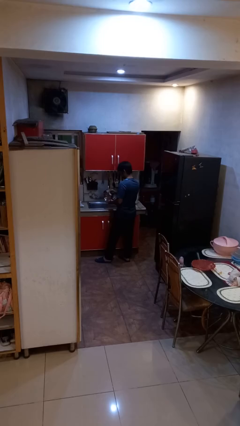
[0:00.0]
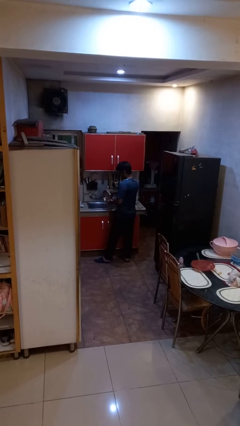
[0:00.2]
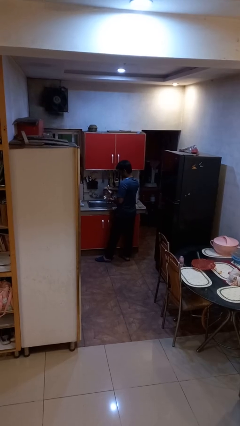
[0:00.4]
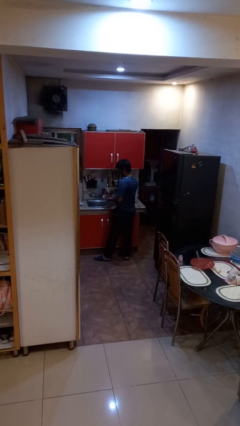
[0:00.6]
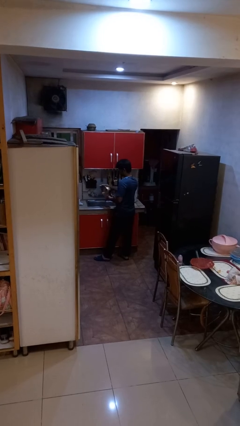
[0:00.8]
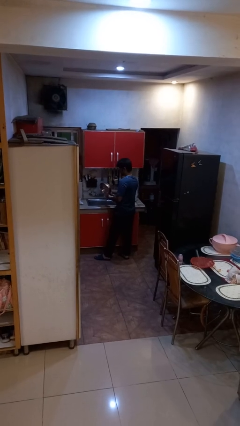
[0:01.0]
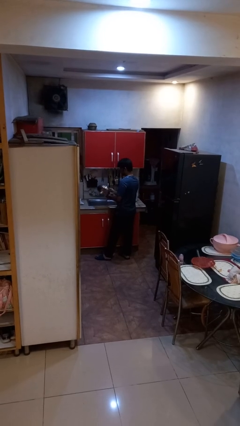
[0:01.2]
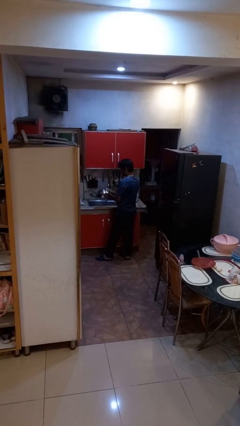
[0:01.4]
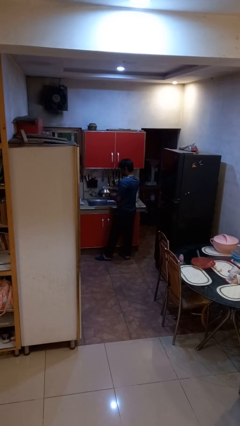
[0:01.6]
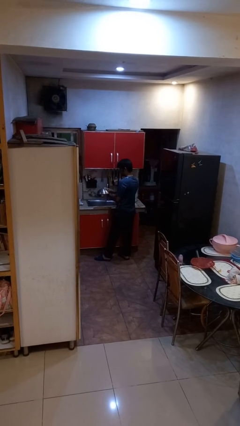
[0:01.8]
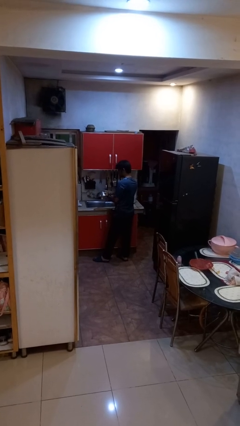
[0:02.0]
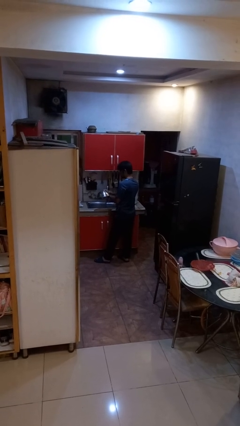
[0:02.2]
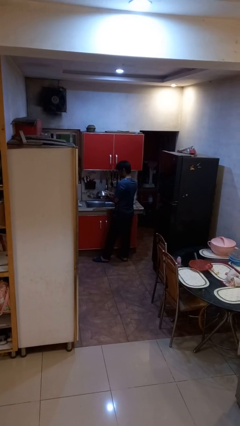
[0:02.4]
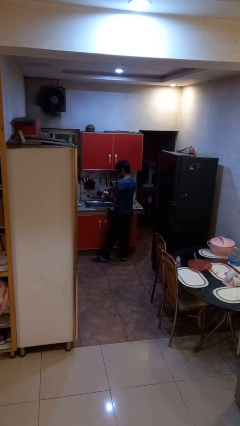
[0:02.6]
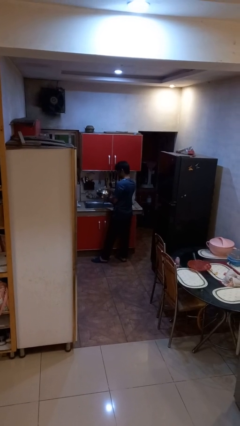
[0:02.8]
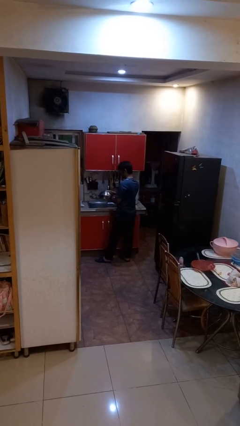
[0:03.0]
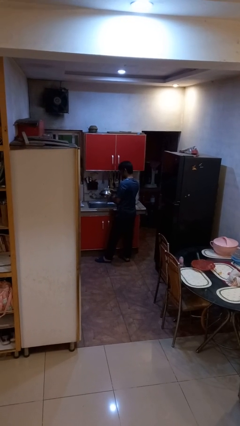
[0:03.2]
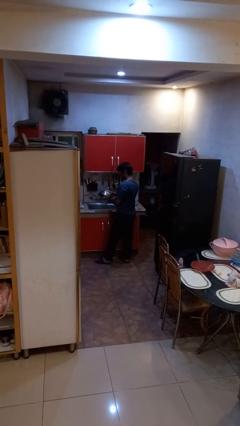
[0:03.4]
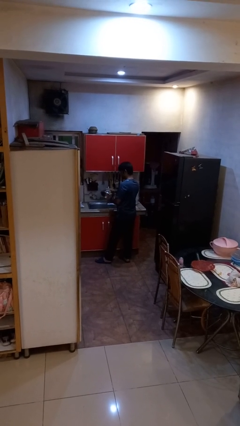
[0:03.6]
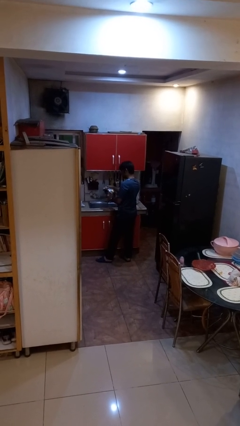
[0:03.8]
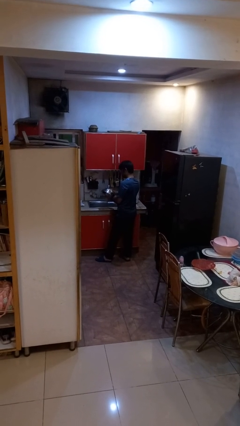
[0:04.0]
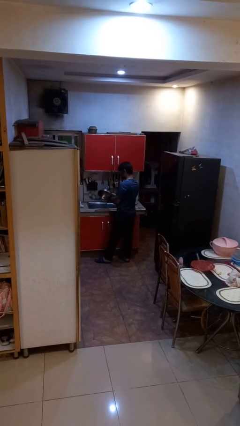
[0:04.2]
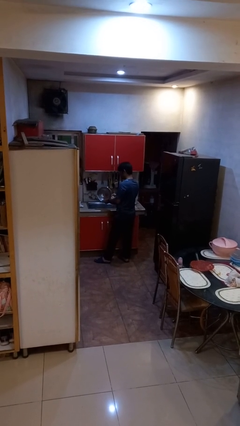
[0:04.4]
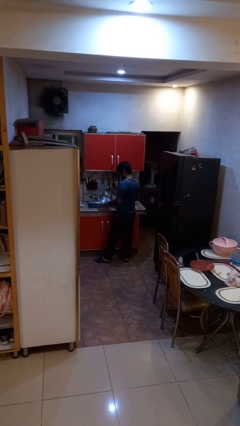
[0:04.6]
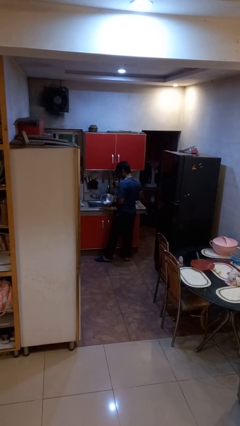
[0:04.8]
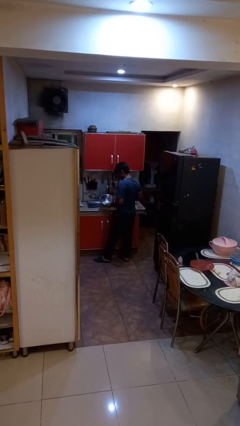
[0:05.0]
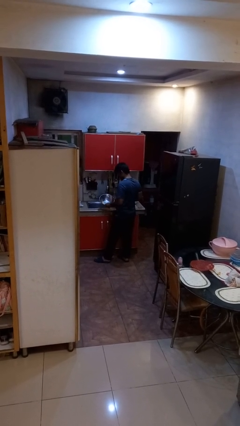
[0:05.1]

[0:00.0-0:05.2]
person washes dish

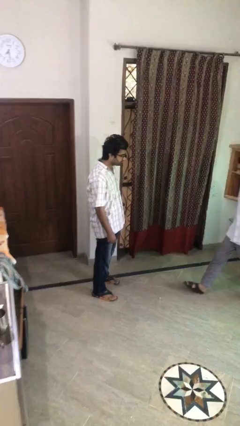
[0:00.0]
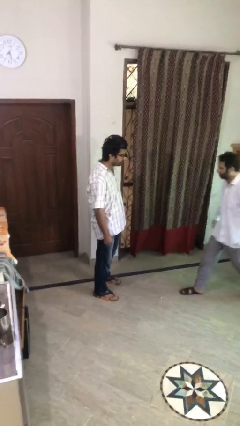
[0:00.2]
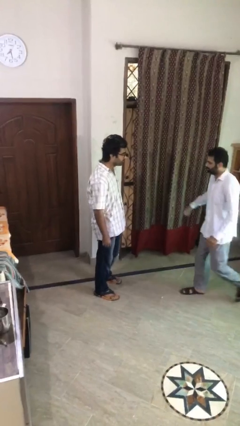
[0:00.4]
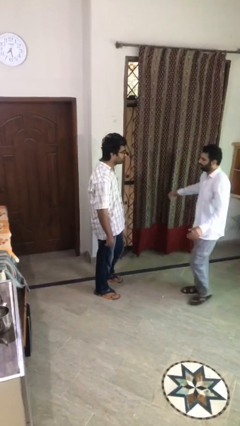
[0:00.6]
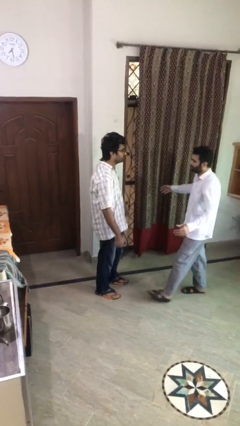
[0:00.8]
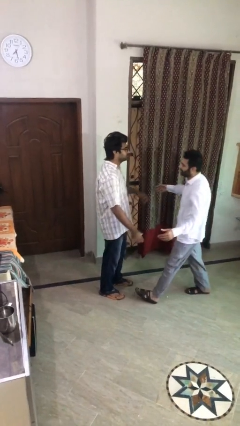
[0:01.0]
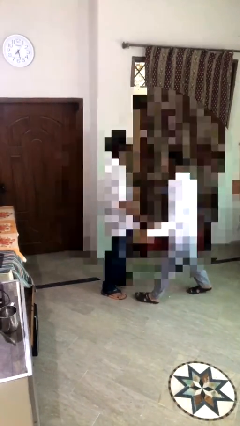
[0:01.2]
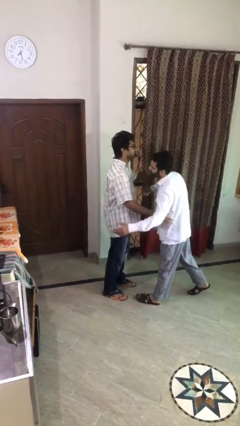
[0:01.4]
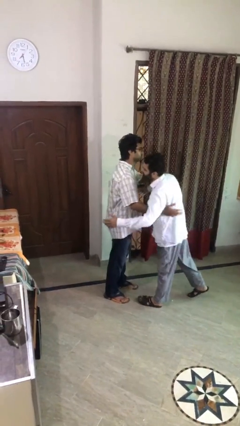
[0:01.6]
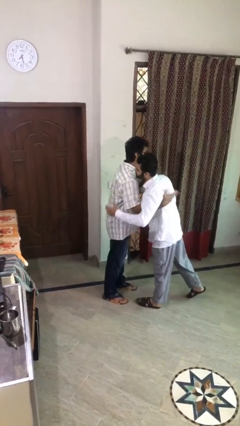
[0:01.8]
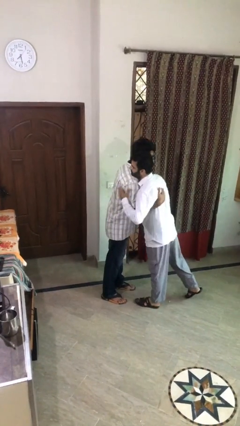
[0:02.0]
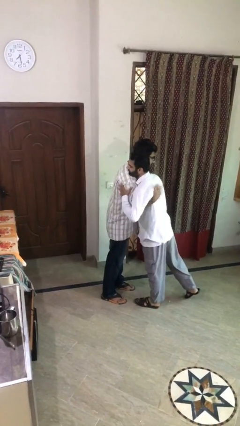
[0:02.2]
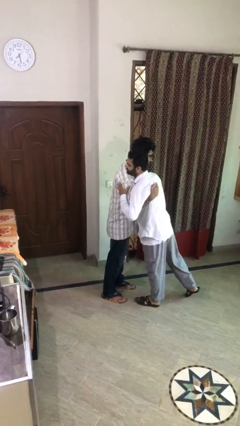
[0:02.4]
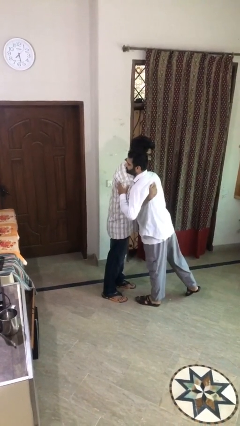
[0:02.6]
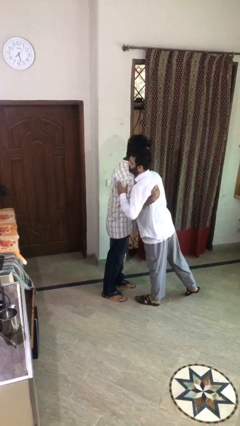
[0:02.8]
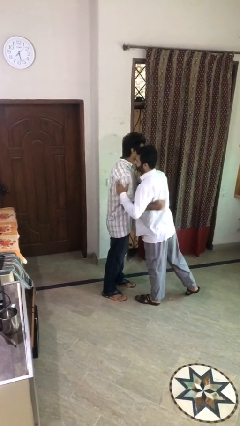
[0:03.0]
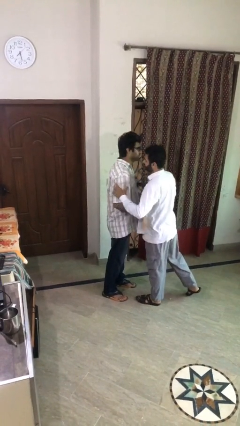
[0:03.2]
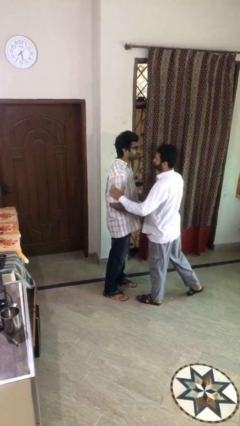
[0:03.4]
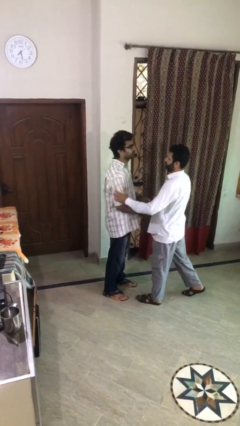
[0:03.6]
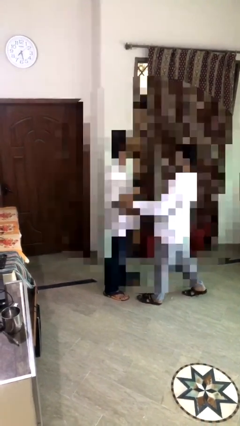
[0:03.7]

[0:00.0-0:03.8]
person embraces person

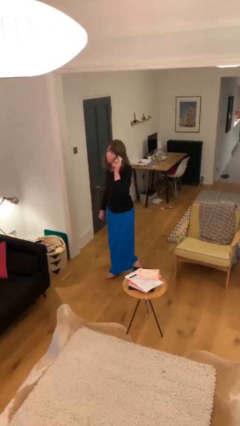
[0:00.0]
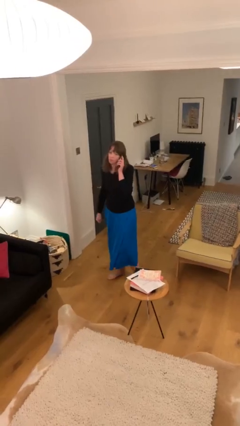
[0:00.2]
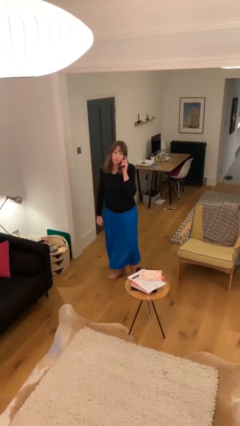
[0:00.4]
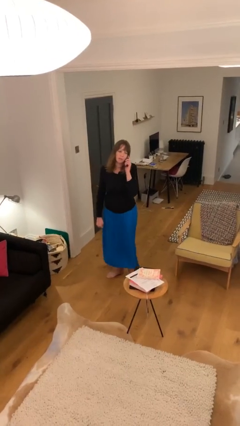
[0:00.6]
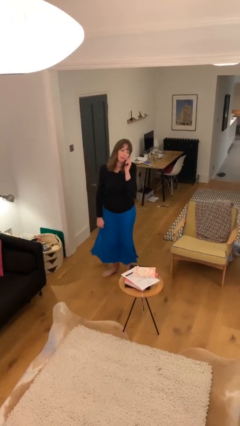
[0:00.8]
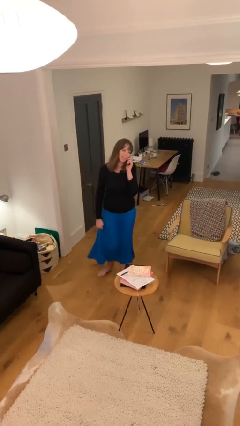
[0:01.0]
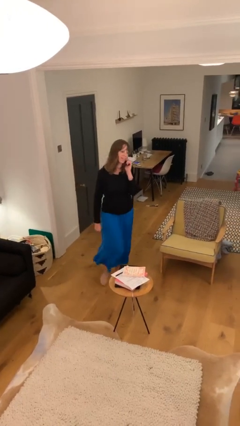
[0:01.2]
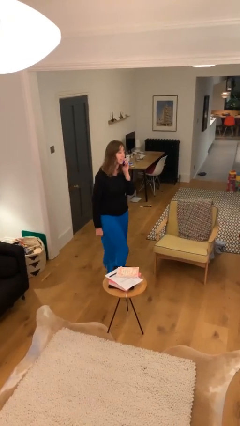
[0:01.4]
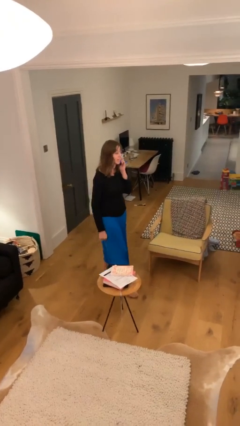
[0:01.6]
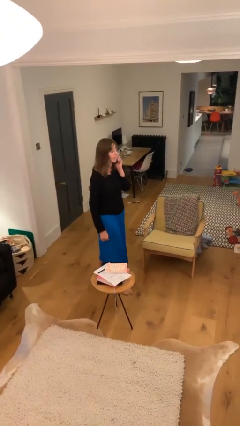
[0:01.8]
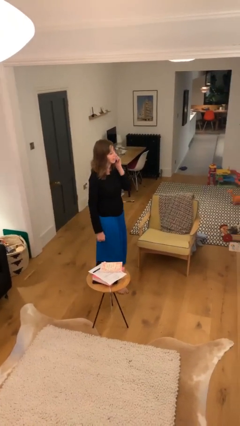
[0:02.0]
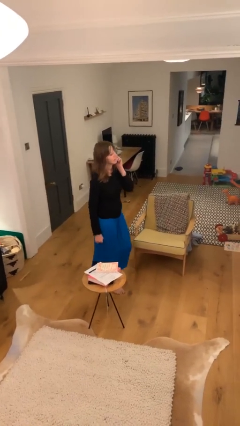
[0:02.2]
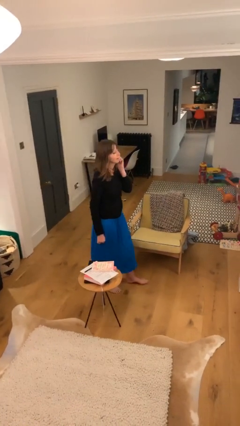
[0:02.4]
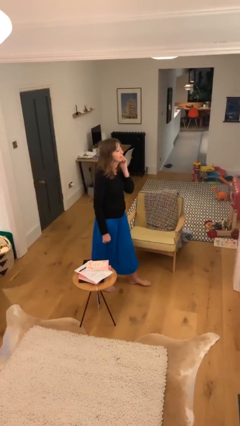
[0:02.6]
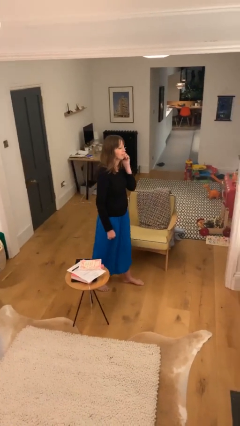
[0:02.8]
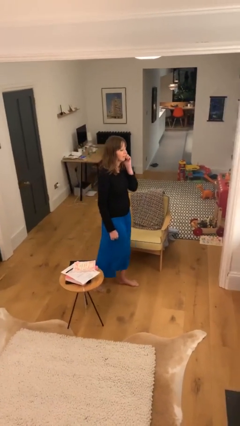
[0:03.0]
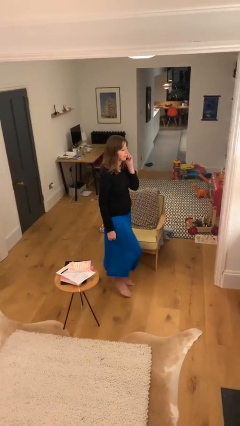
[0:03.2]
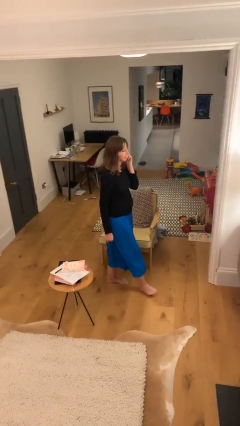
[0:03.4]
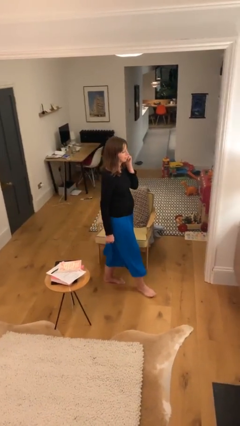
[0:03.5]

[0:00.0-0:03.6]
person talks on phone

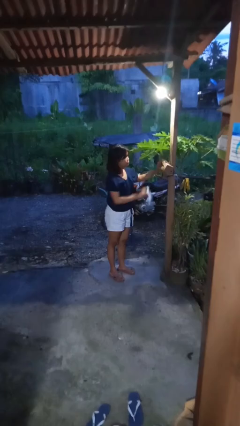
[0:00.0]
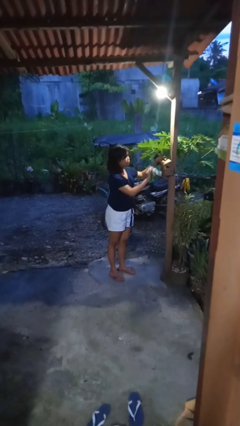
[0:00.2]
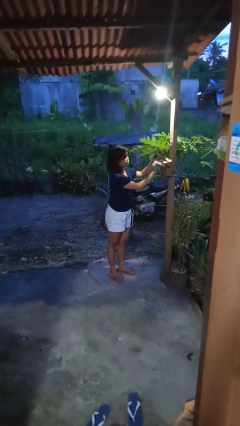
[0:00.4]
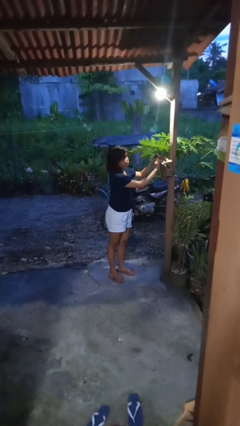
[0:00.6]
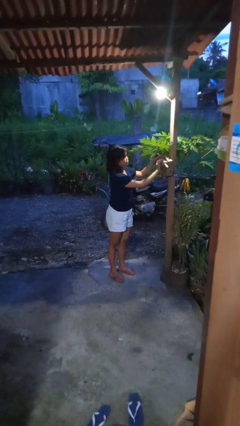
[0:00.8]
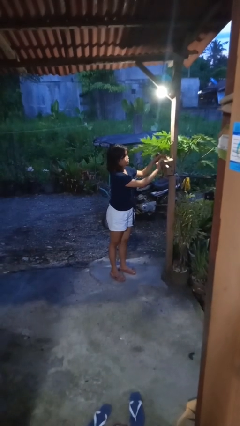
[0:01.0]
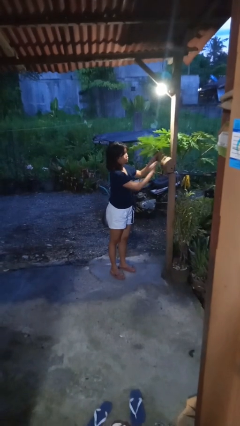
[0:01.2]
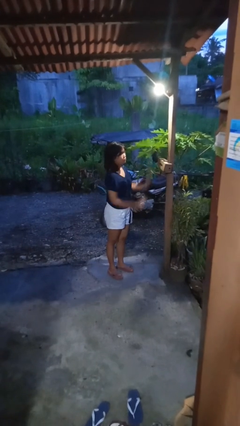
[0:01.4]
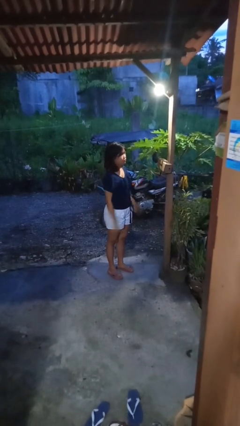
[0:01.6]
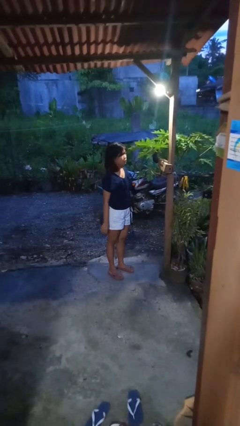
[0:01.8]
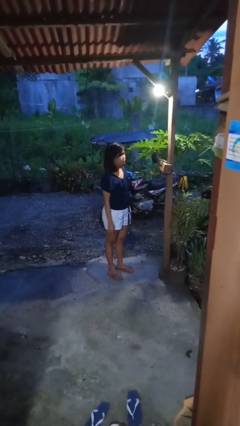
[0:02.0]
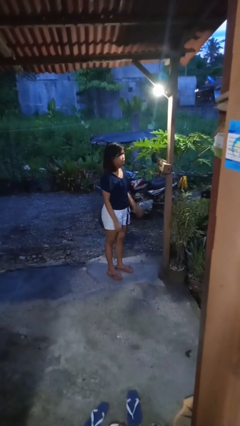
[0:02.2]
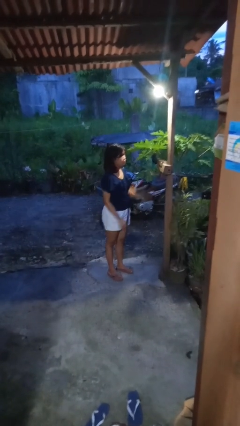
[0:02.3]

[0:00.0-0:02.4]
person puts letters in mailbox

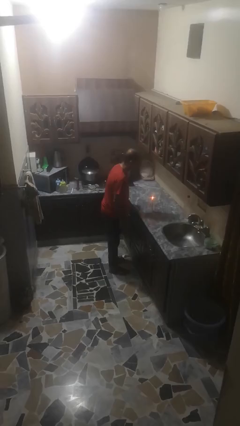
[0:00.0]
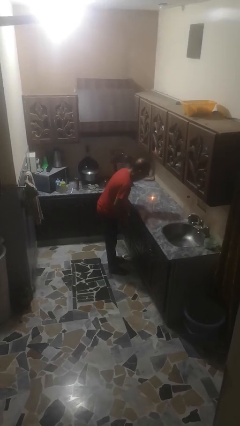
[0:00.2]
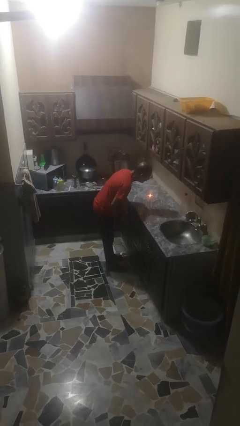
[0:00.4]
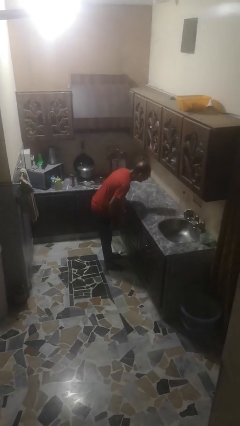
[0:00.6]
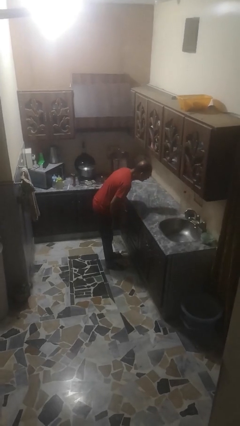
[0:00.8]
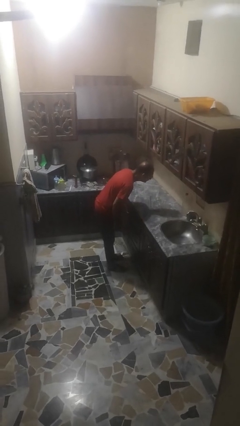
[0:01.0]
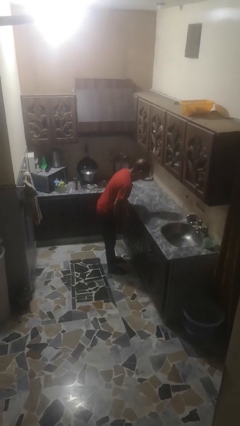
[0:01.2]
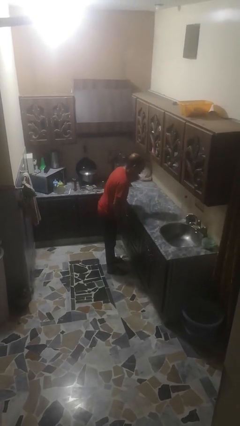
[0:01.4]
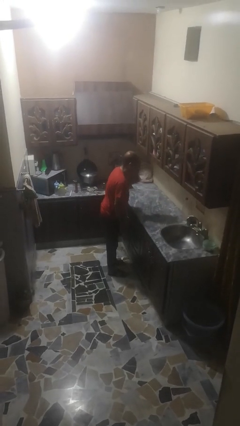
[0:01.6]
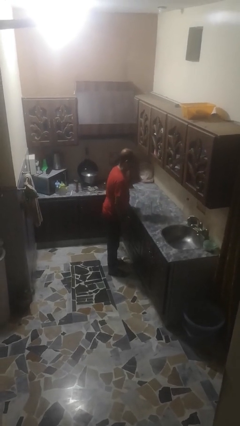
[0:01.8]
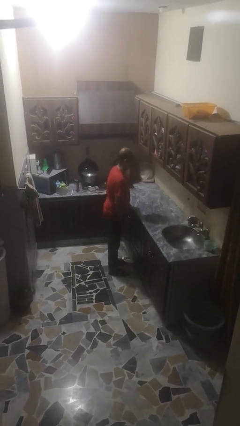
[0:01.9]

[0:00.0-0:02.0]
person extinguishes candle

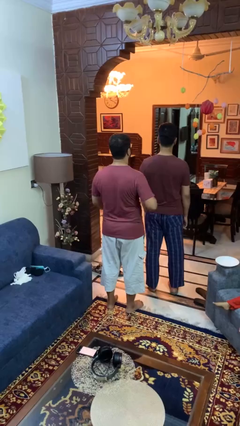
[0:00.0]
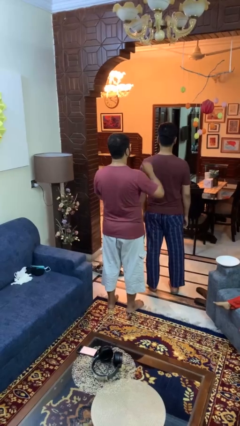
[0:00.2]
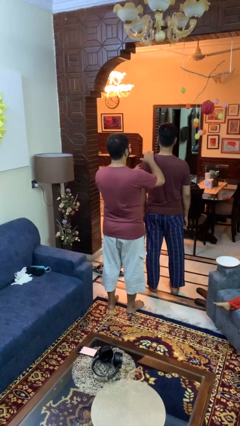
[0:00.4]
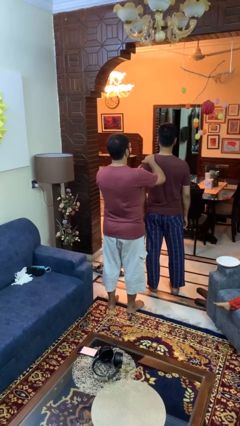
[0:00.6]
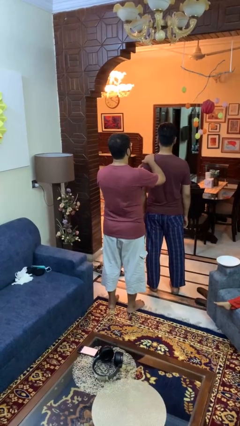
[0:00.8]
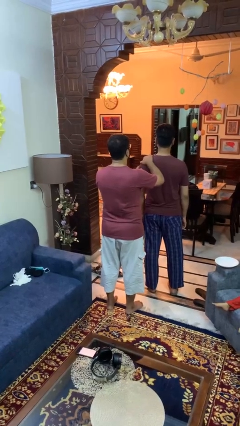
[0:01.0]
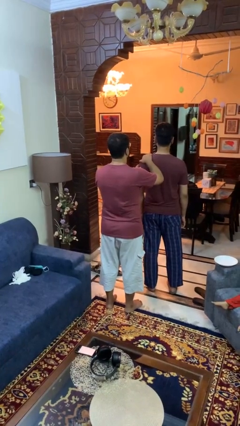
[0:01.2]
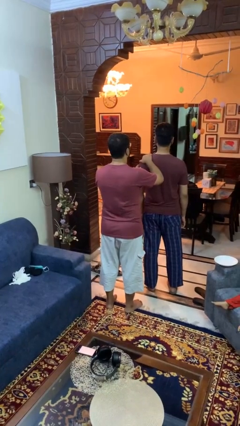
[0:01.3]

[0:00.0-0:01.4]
person grabs person by shoulder
